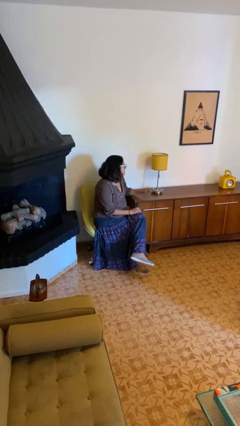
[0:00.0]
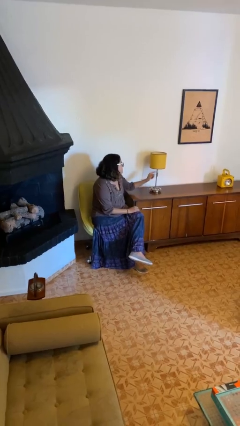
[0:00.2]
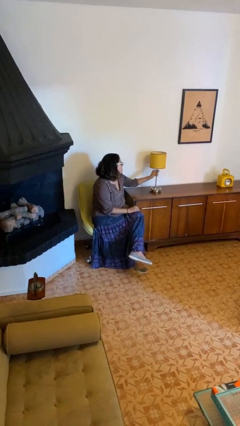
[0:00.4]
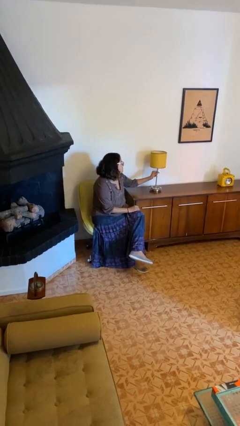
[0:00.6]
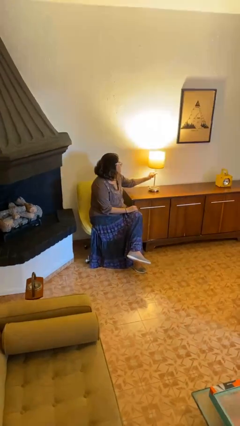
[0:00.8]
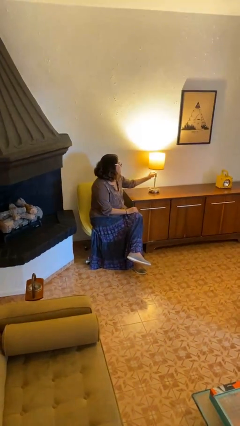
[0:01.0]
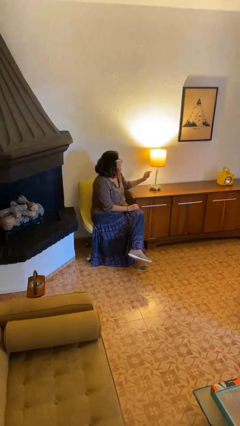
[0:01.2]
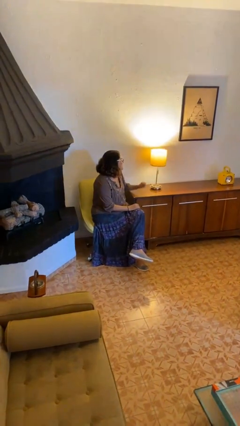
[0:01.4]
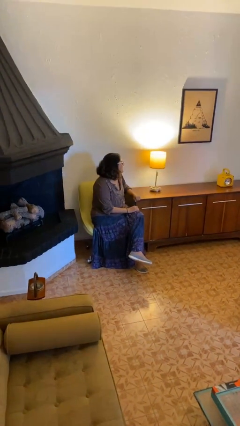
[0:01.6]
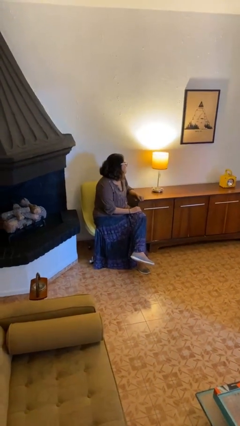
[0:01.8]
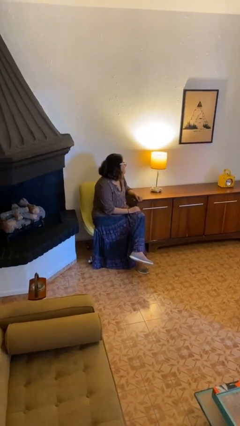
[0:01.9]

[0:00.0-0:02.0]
person turns on lamp

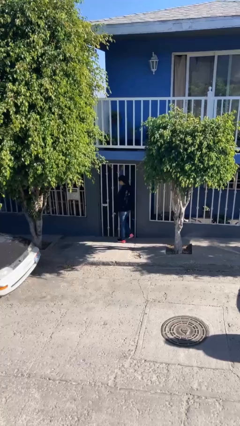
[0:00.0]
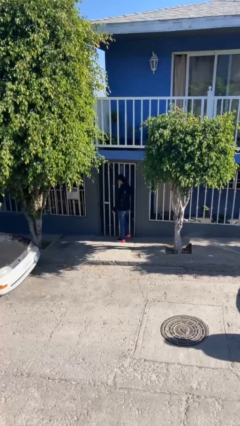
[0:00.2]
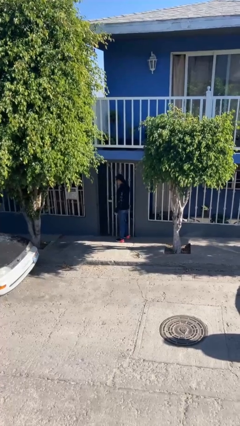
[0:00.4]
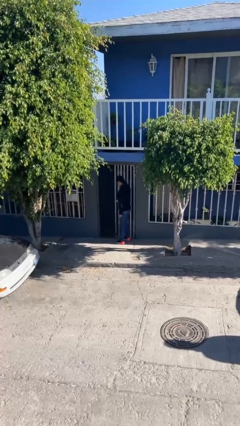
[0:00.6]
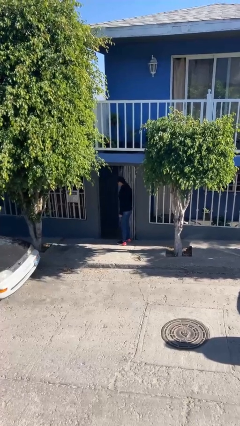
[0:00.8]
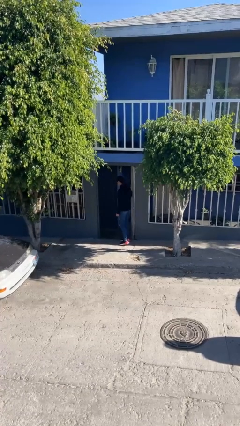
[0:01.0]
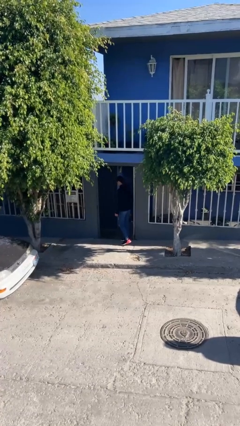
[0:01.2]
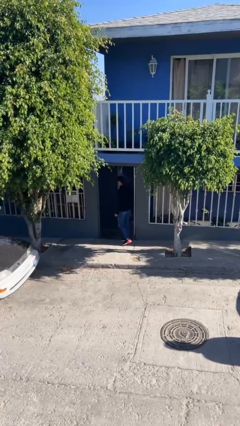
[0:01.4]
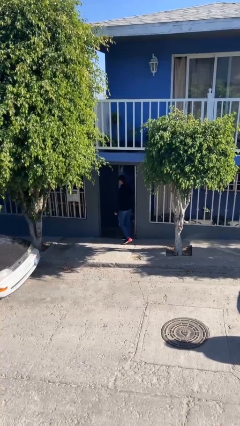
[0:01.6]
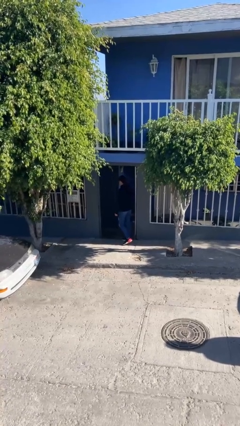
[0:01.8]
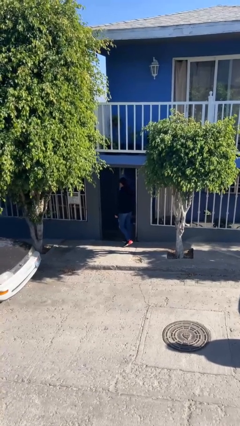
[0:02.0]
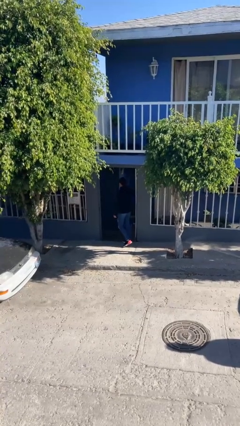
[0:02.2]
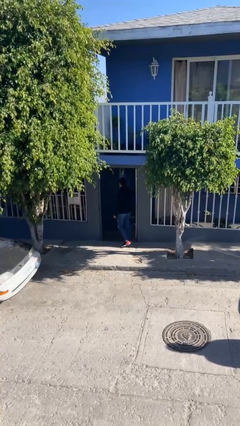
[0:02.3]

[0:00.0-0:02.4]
person opens facility door

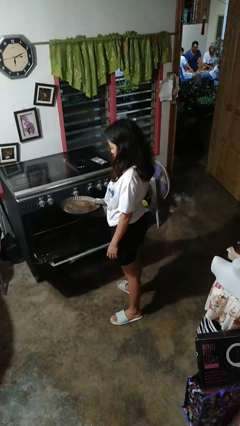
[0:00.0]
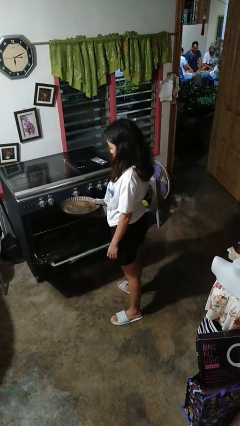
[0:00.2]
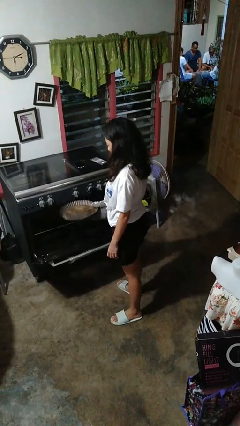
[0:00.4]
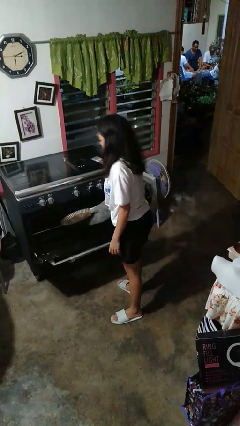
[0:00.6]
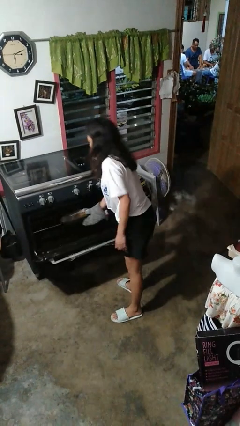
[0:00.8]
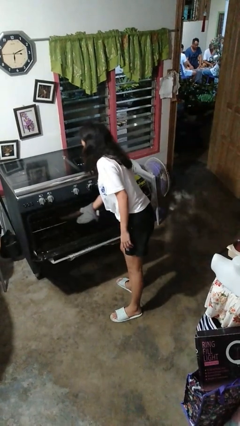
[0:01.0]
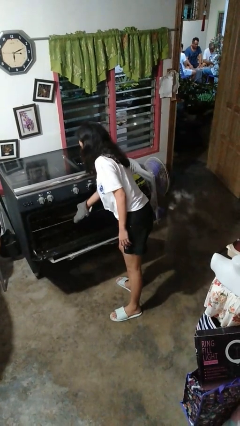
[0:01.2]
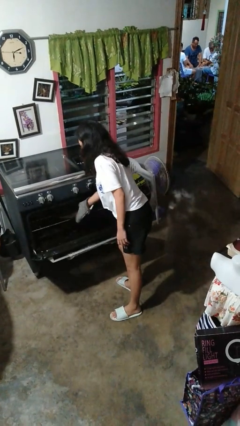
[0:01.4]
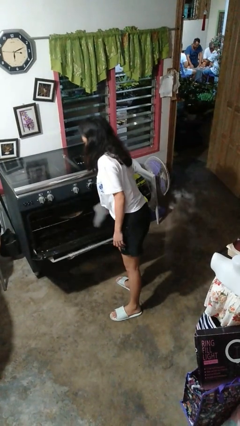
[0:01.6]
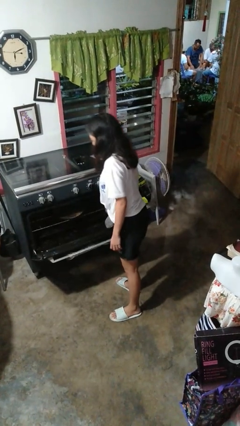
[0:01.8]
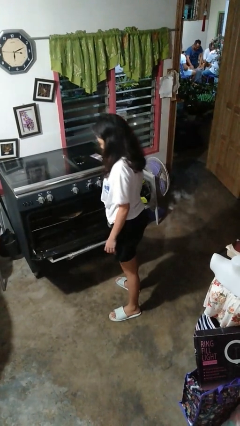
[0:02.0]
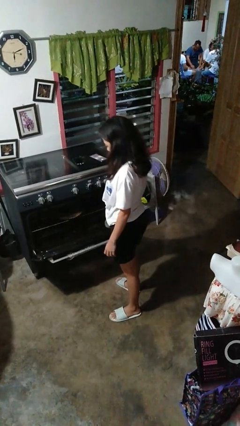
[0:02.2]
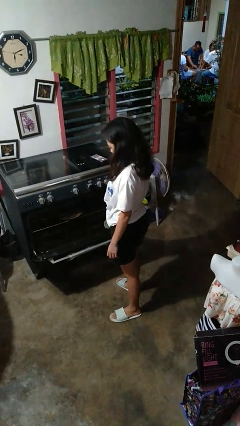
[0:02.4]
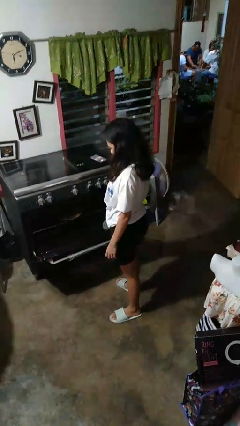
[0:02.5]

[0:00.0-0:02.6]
person puts object into oven

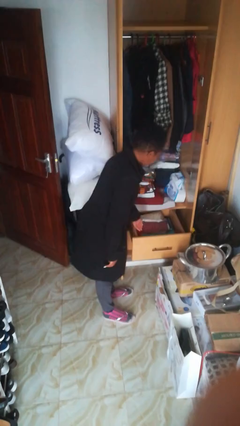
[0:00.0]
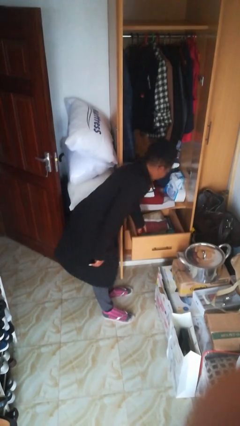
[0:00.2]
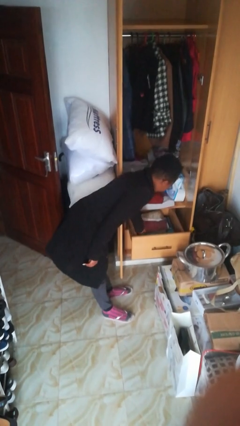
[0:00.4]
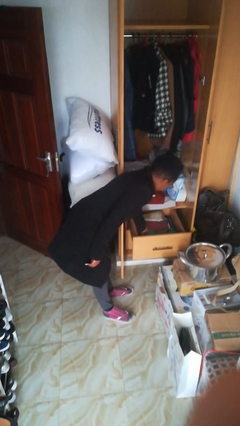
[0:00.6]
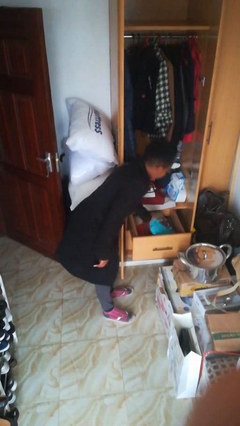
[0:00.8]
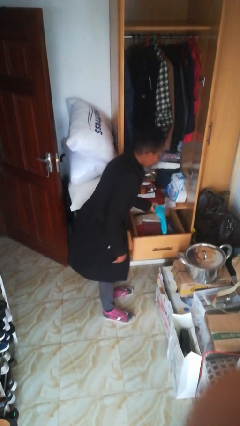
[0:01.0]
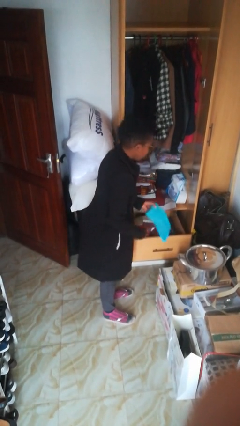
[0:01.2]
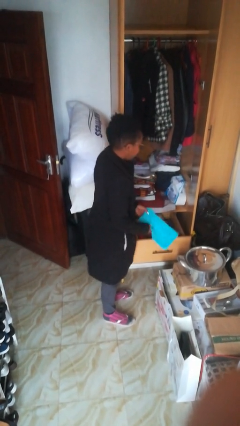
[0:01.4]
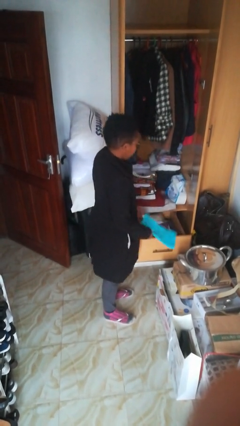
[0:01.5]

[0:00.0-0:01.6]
person takes clothes from dresser

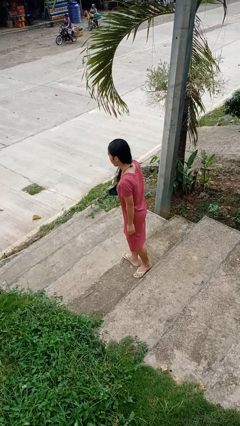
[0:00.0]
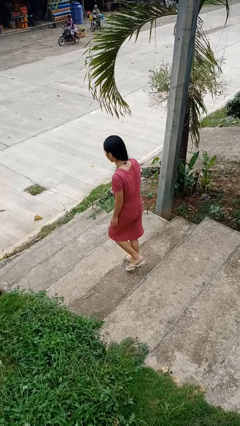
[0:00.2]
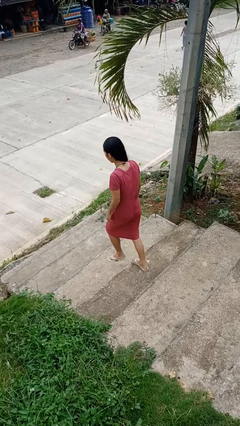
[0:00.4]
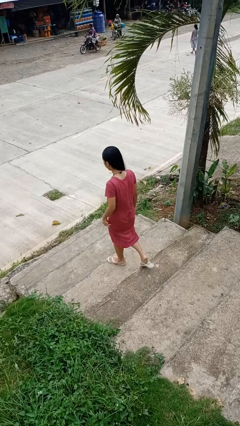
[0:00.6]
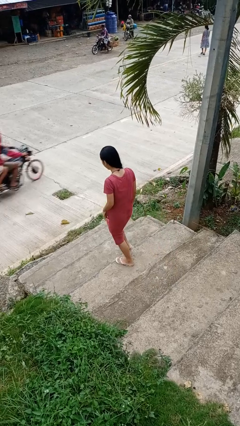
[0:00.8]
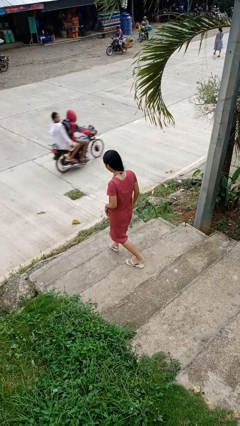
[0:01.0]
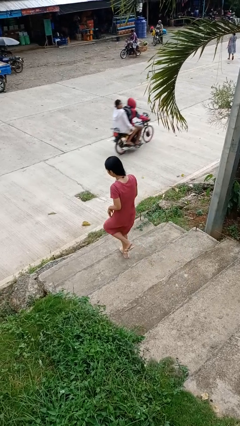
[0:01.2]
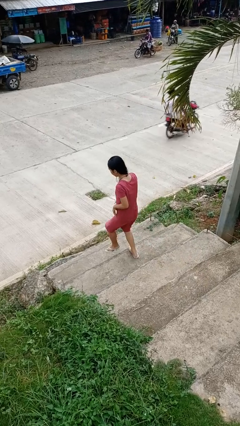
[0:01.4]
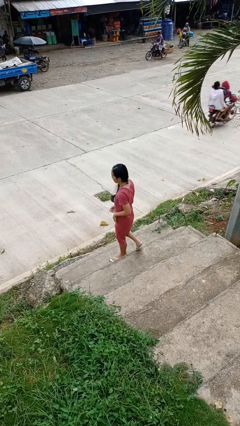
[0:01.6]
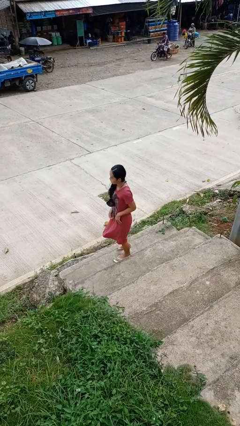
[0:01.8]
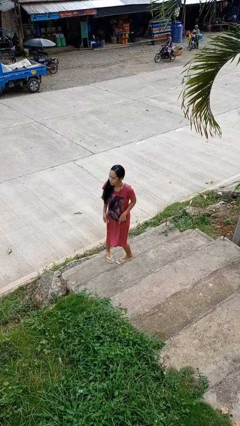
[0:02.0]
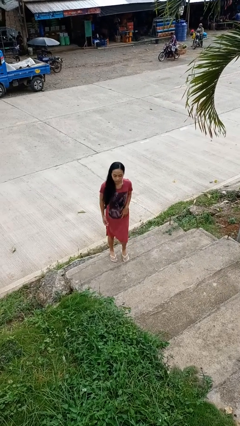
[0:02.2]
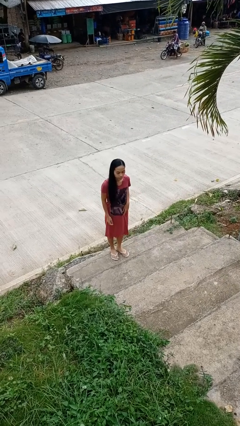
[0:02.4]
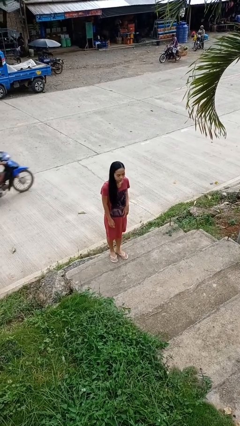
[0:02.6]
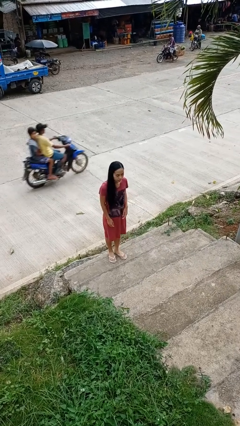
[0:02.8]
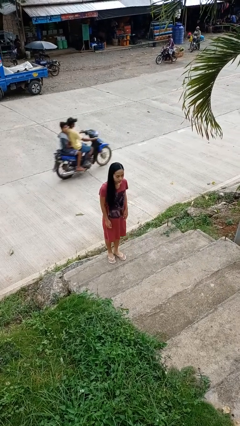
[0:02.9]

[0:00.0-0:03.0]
person climbs down stairs

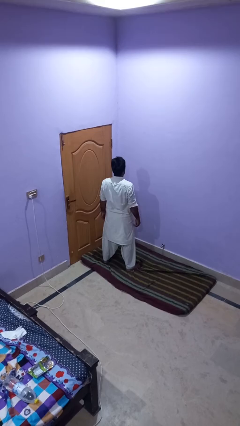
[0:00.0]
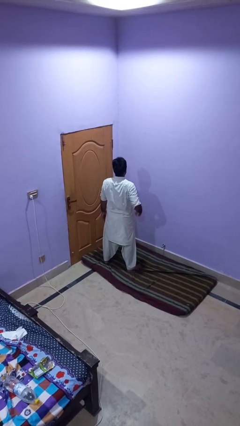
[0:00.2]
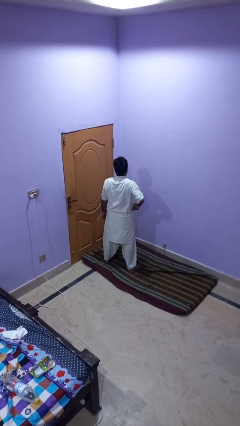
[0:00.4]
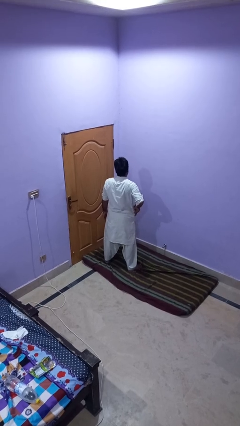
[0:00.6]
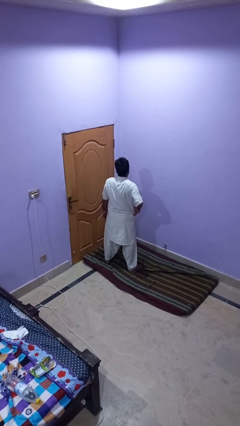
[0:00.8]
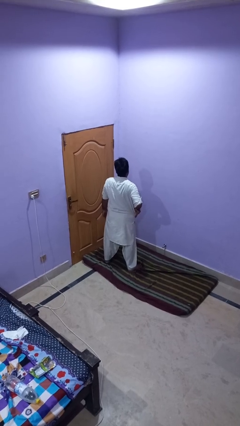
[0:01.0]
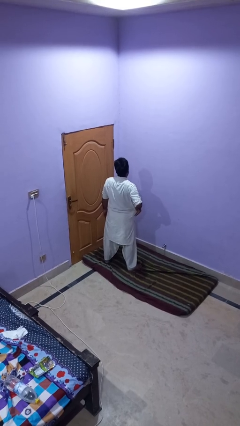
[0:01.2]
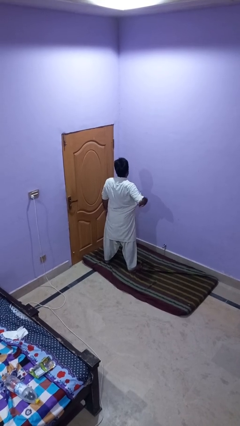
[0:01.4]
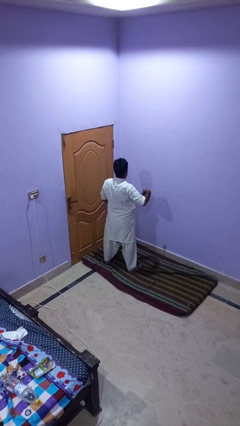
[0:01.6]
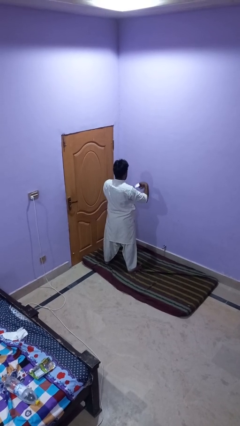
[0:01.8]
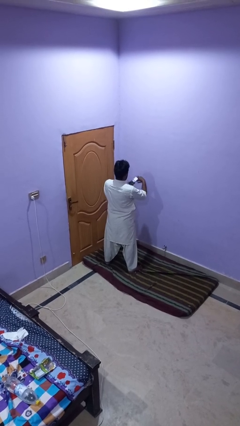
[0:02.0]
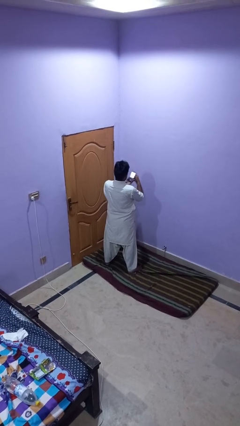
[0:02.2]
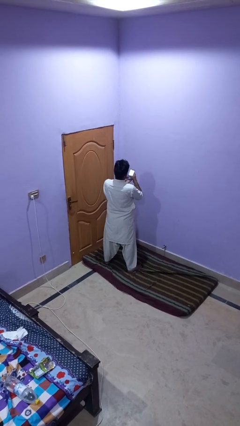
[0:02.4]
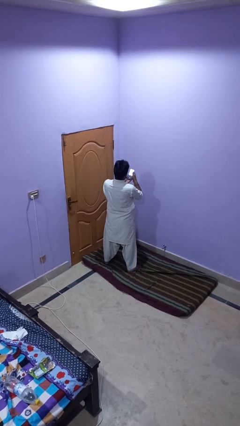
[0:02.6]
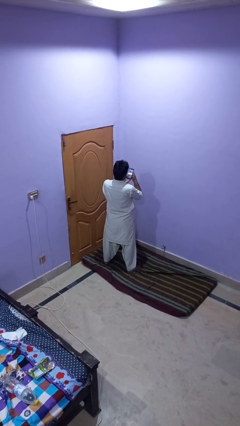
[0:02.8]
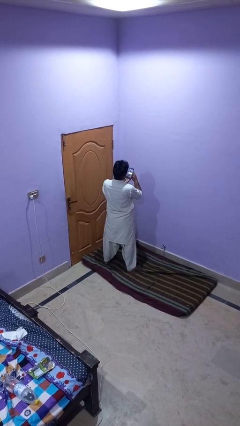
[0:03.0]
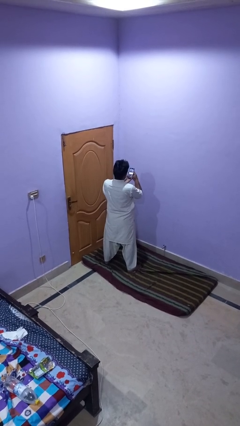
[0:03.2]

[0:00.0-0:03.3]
person takes phone from pocket

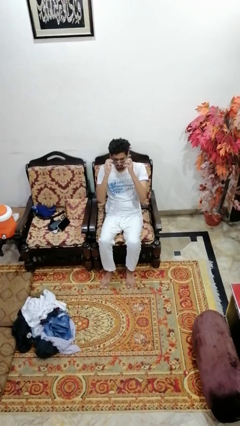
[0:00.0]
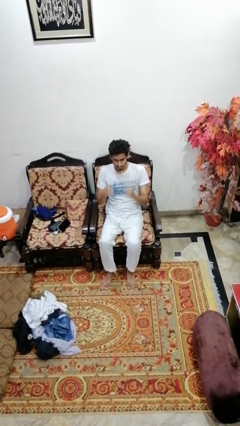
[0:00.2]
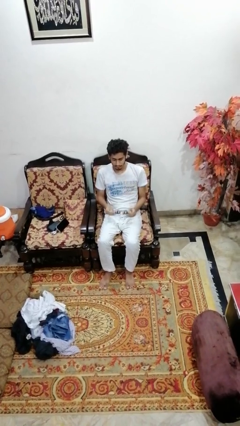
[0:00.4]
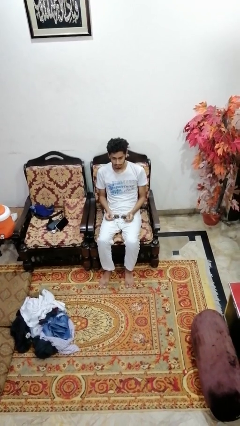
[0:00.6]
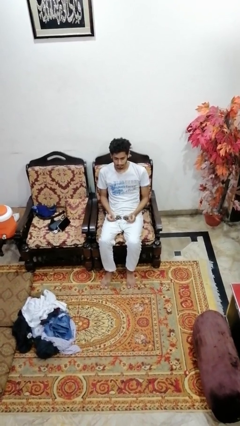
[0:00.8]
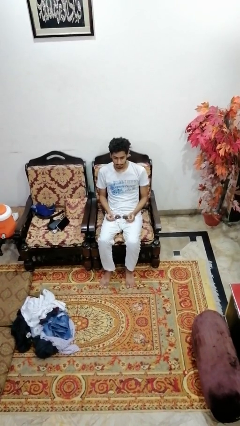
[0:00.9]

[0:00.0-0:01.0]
person takes off sunglasses

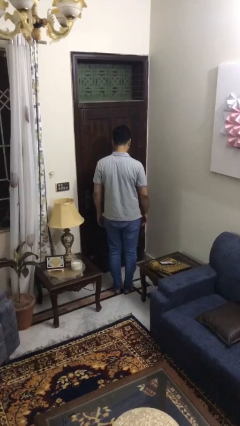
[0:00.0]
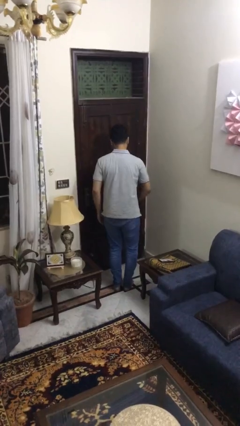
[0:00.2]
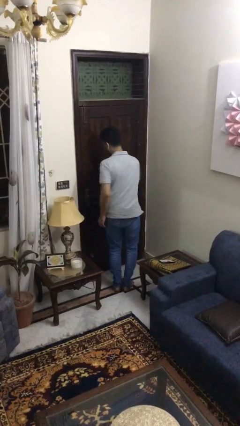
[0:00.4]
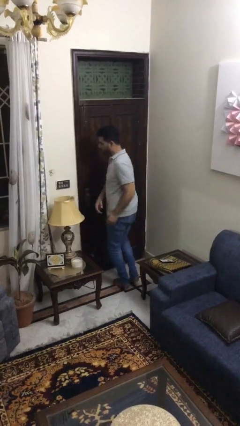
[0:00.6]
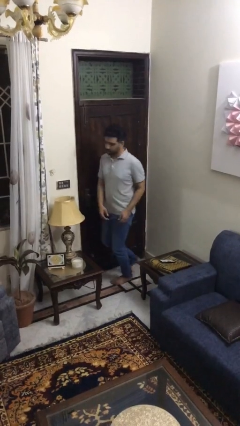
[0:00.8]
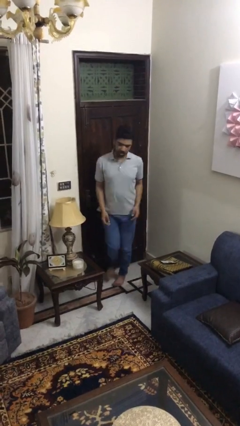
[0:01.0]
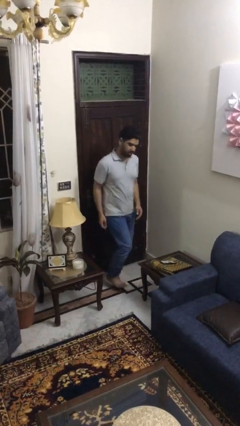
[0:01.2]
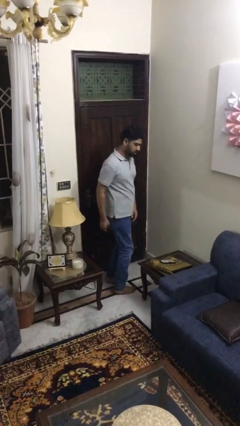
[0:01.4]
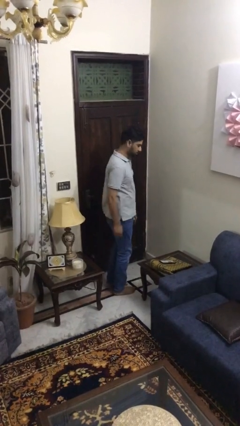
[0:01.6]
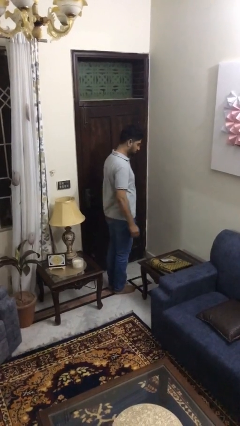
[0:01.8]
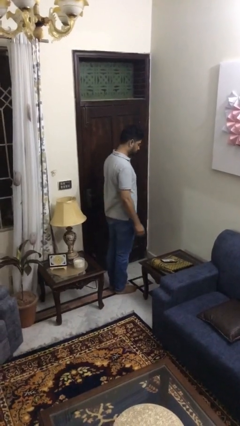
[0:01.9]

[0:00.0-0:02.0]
person twirls
